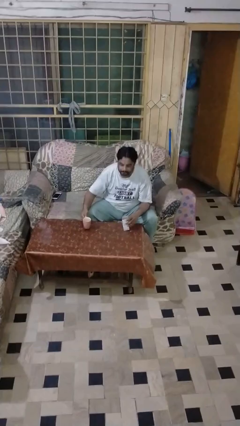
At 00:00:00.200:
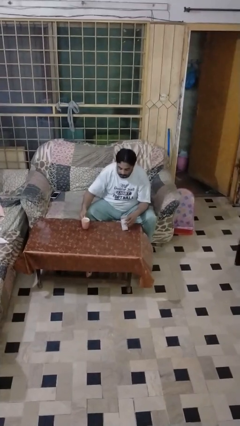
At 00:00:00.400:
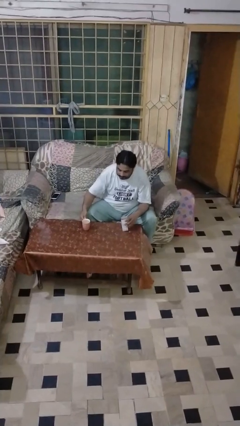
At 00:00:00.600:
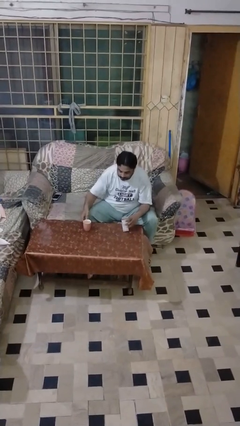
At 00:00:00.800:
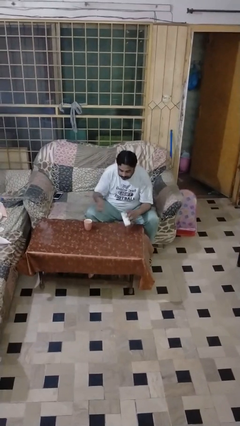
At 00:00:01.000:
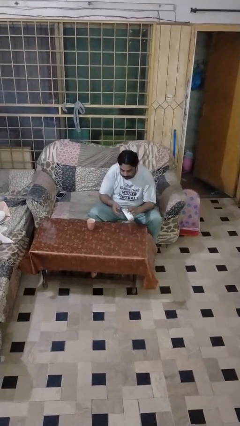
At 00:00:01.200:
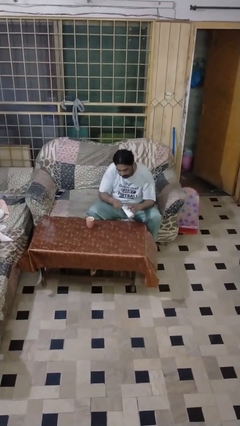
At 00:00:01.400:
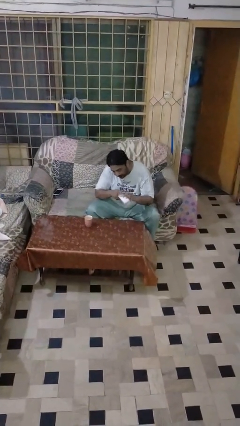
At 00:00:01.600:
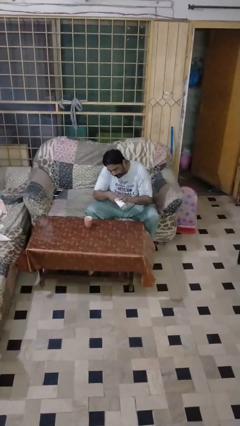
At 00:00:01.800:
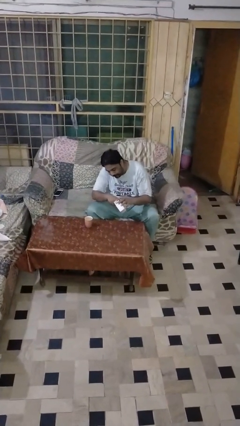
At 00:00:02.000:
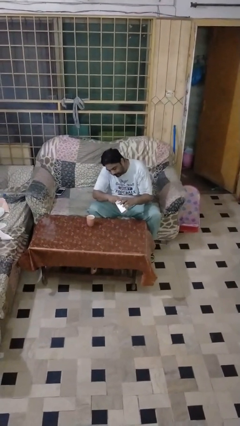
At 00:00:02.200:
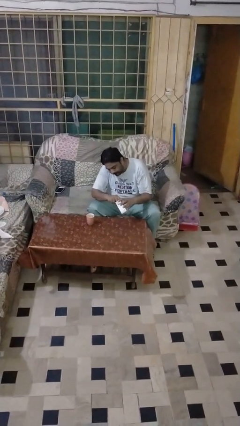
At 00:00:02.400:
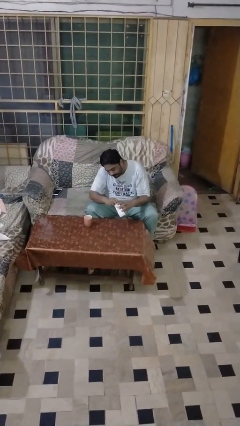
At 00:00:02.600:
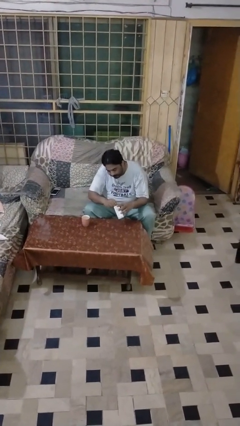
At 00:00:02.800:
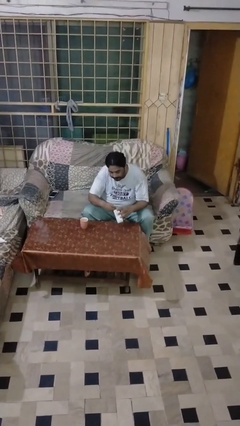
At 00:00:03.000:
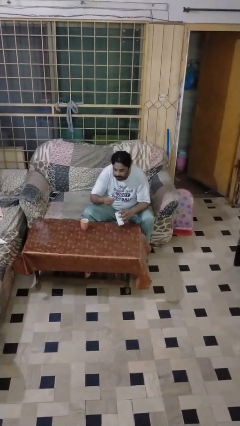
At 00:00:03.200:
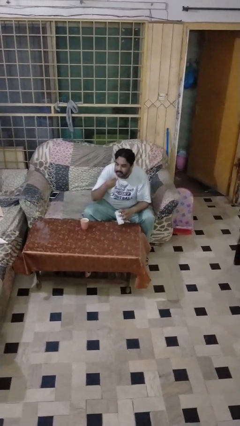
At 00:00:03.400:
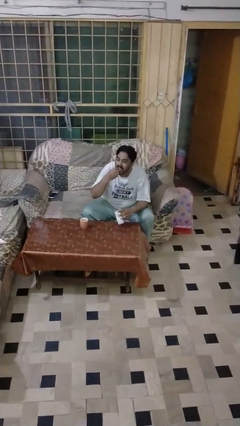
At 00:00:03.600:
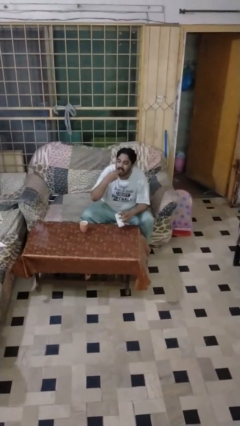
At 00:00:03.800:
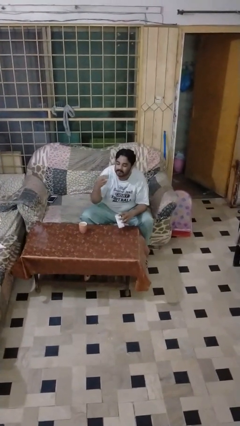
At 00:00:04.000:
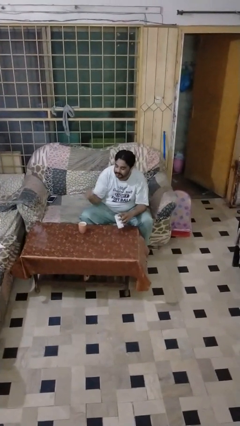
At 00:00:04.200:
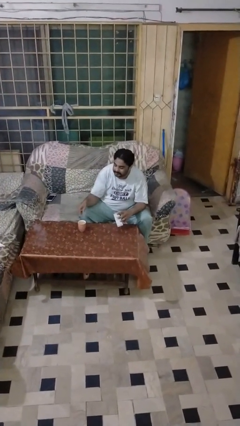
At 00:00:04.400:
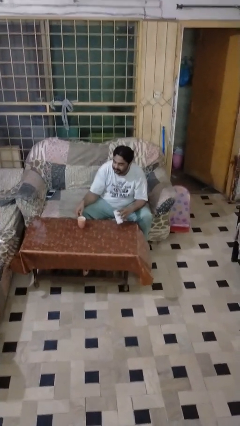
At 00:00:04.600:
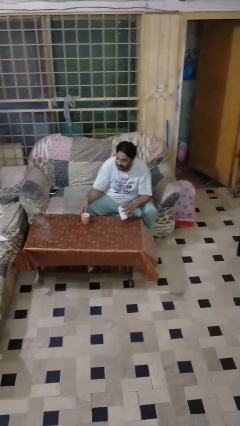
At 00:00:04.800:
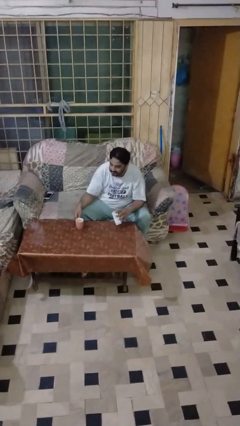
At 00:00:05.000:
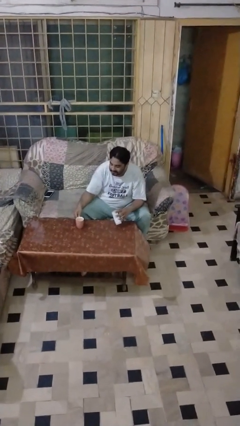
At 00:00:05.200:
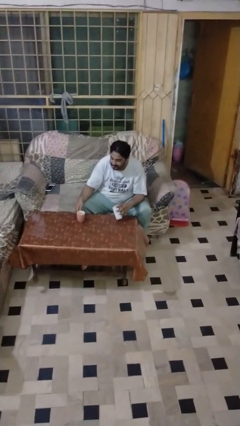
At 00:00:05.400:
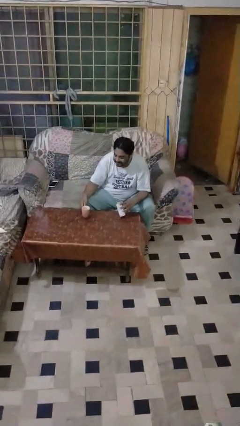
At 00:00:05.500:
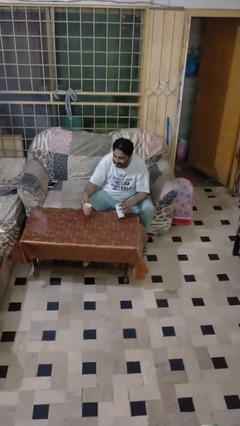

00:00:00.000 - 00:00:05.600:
person takes medicine pills

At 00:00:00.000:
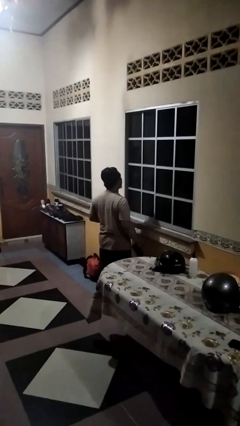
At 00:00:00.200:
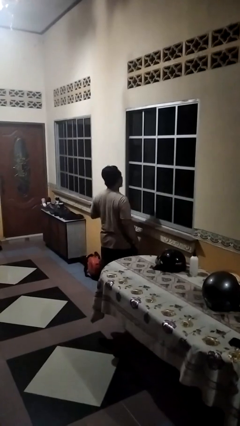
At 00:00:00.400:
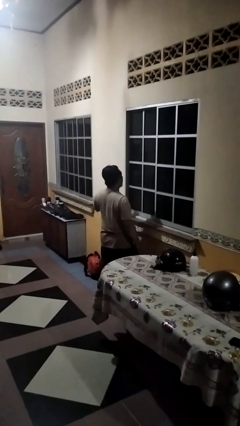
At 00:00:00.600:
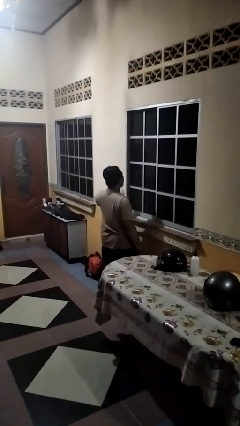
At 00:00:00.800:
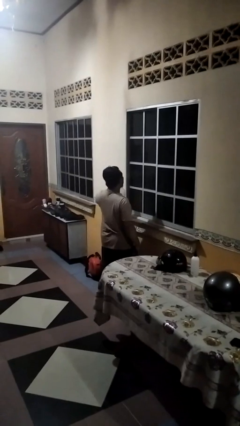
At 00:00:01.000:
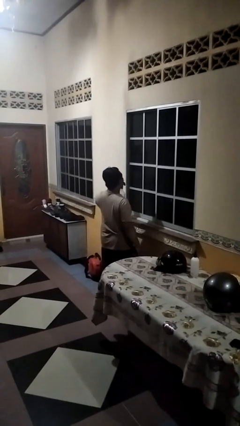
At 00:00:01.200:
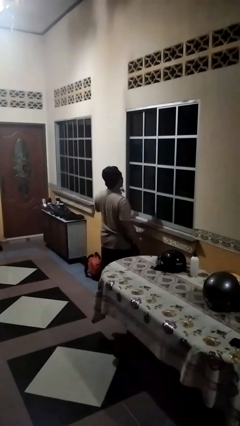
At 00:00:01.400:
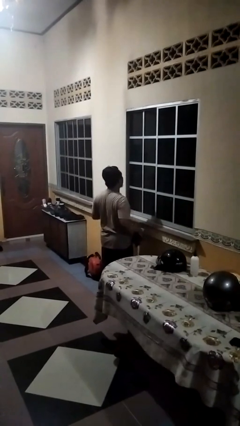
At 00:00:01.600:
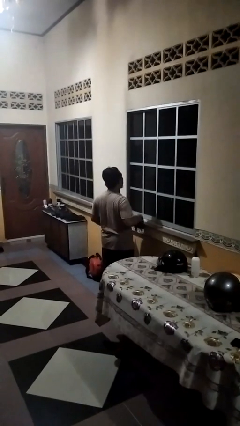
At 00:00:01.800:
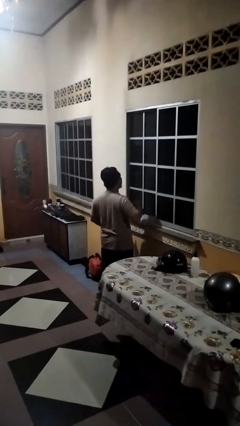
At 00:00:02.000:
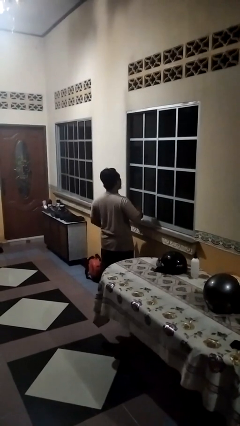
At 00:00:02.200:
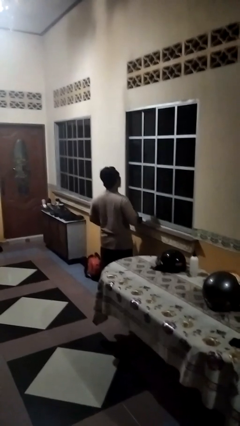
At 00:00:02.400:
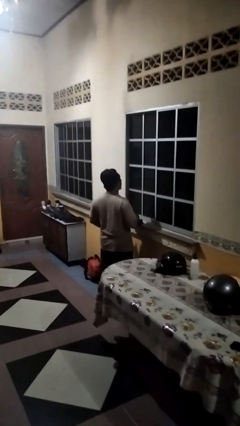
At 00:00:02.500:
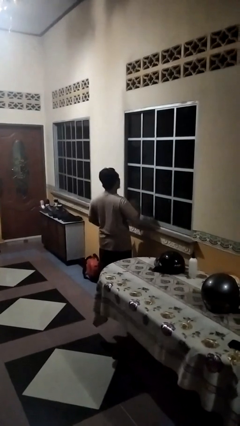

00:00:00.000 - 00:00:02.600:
person sprays from bottle

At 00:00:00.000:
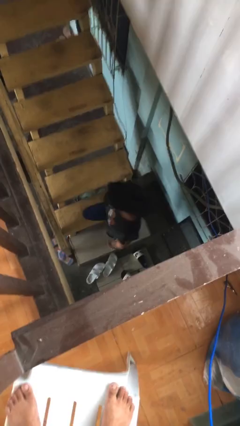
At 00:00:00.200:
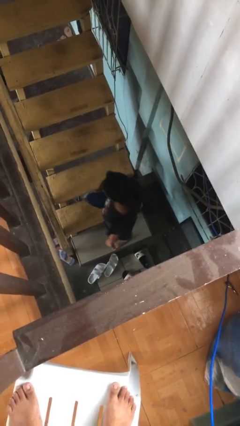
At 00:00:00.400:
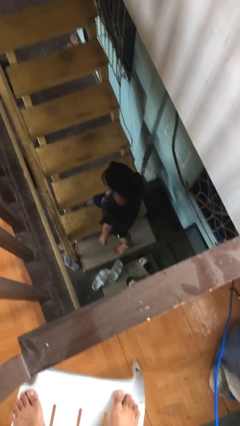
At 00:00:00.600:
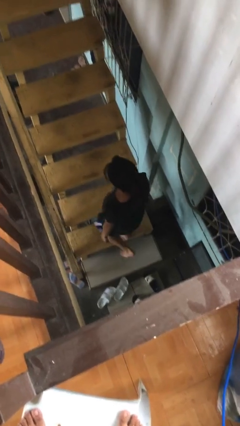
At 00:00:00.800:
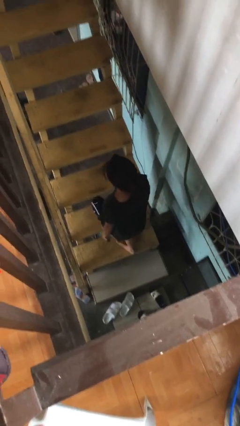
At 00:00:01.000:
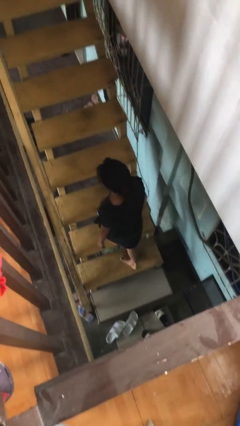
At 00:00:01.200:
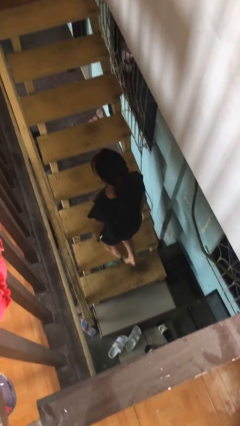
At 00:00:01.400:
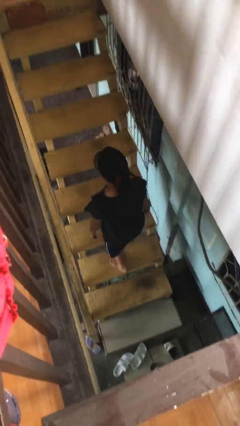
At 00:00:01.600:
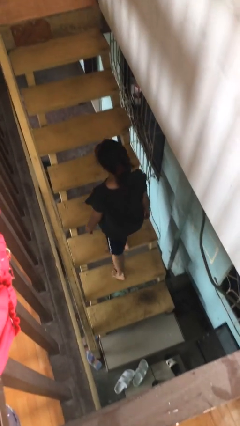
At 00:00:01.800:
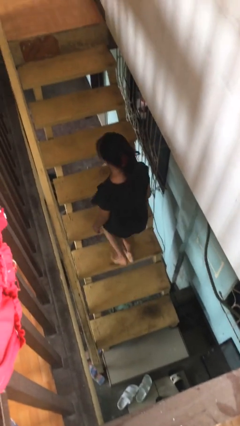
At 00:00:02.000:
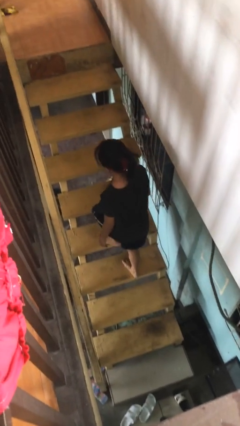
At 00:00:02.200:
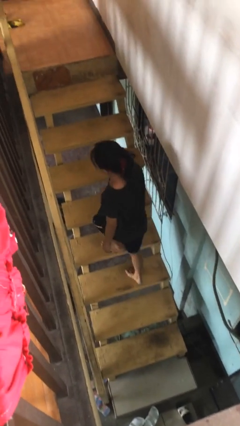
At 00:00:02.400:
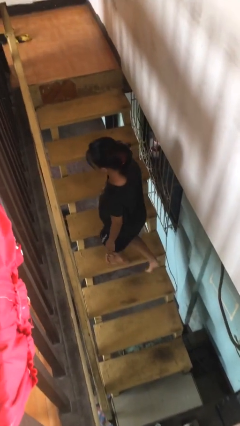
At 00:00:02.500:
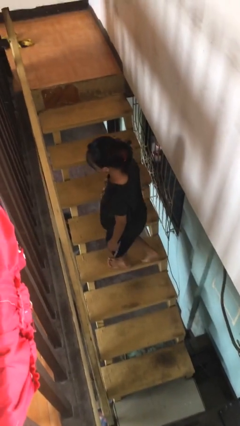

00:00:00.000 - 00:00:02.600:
person climbs up stairs

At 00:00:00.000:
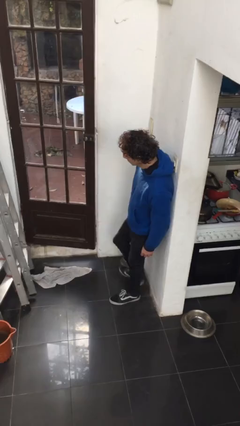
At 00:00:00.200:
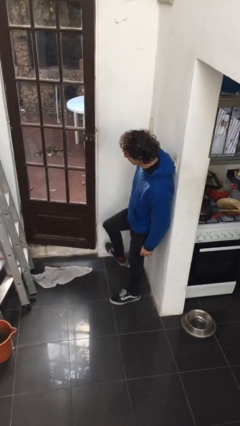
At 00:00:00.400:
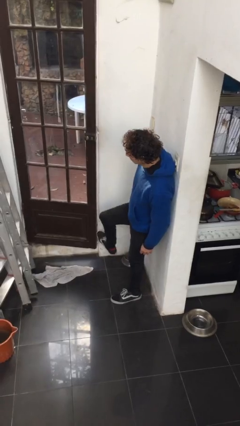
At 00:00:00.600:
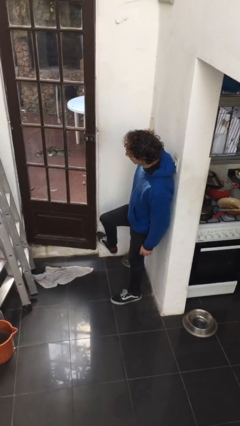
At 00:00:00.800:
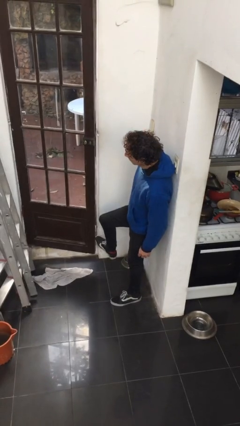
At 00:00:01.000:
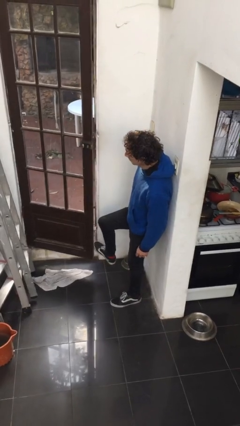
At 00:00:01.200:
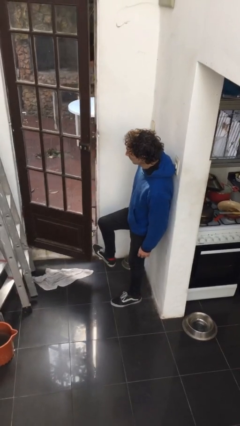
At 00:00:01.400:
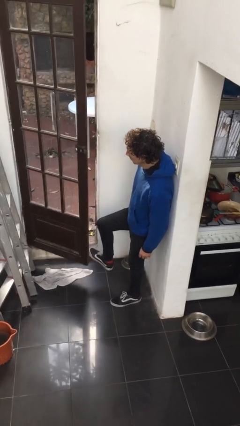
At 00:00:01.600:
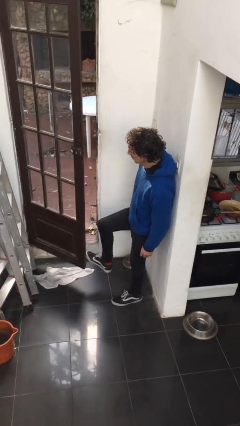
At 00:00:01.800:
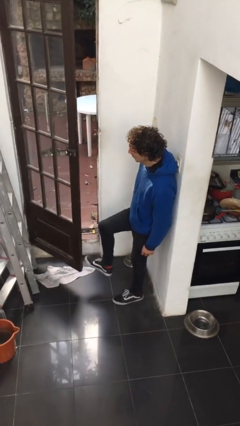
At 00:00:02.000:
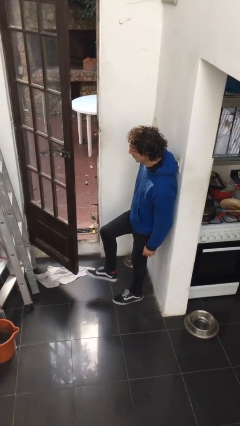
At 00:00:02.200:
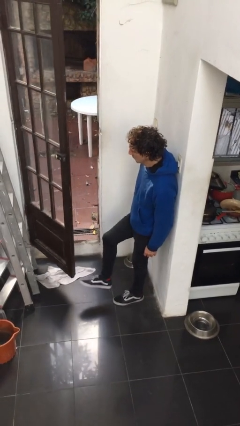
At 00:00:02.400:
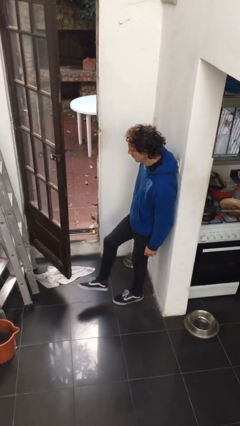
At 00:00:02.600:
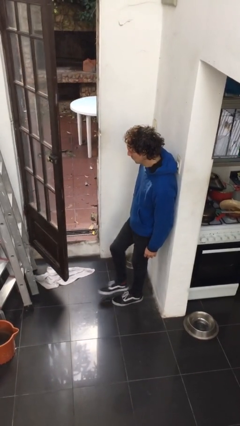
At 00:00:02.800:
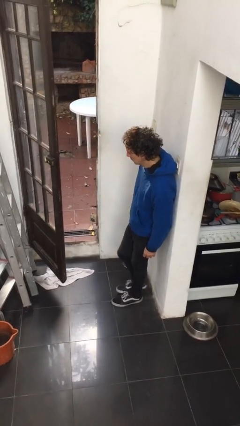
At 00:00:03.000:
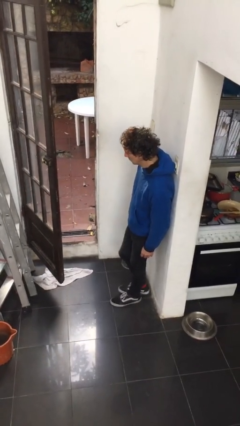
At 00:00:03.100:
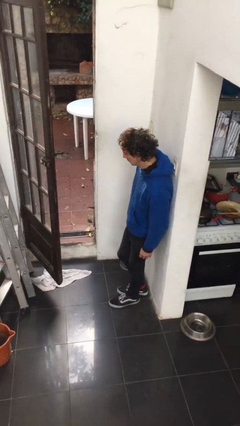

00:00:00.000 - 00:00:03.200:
person opens facility door

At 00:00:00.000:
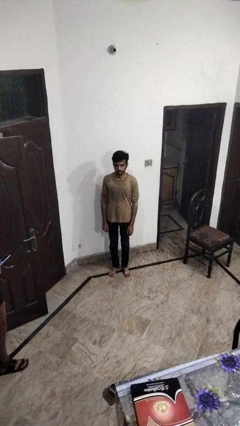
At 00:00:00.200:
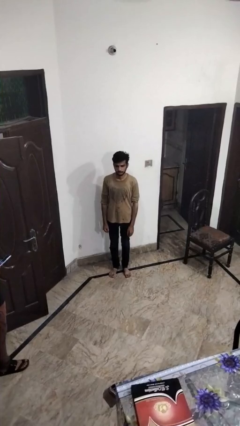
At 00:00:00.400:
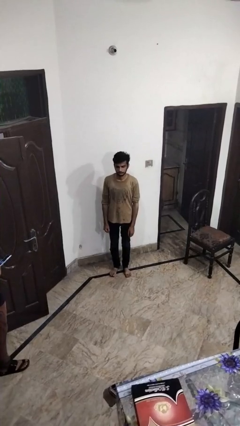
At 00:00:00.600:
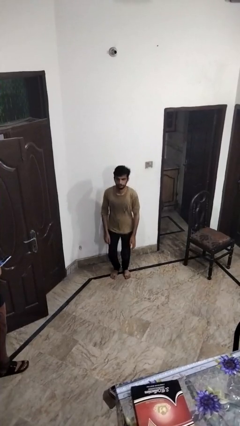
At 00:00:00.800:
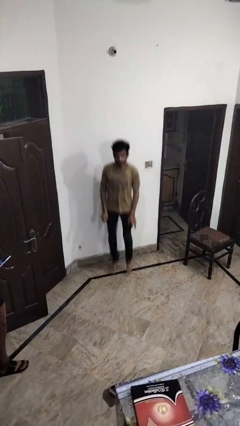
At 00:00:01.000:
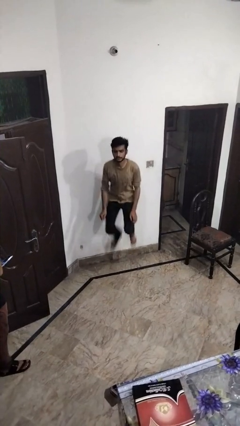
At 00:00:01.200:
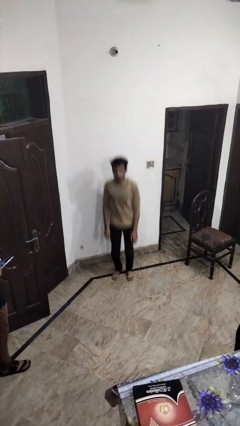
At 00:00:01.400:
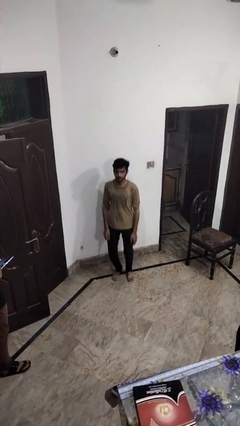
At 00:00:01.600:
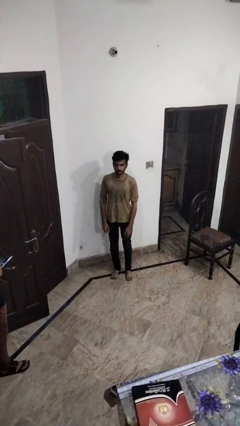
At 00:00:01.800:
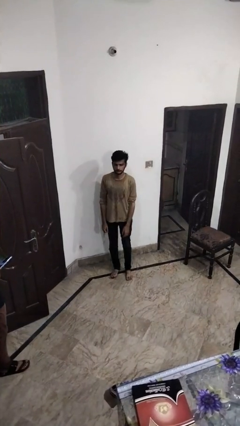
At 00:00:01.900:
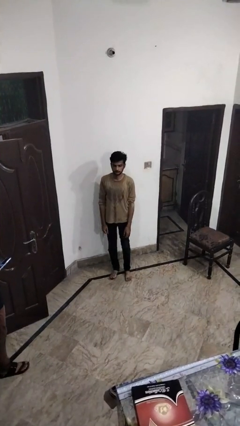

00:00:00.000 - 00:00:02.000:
person jumps

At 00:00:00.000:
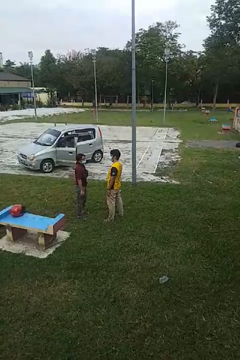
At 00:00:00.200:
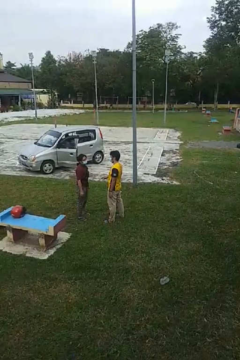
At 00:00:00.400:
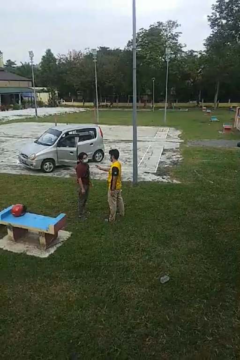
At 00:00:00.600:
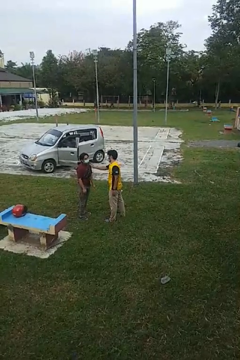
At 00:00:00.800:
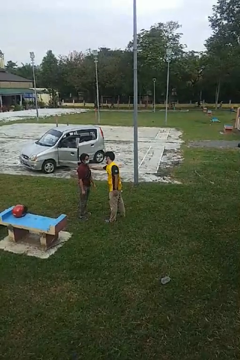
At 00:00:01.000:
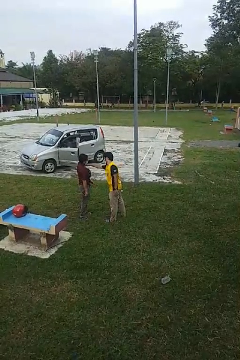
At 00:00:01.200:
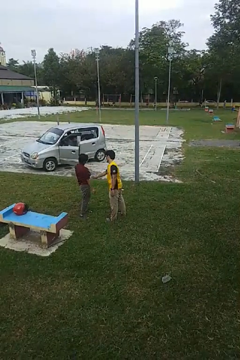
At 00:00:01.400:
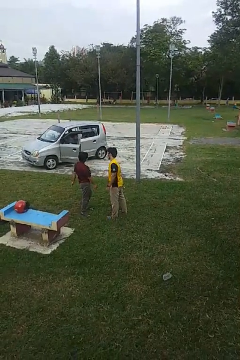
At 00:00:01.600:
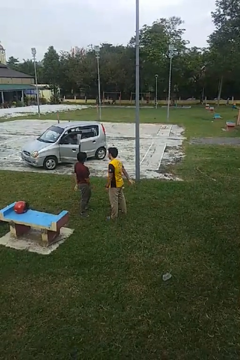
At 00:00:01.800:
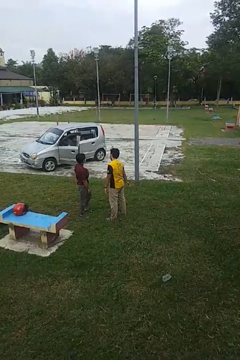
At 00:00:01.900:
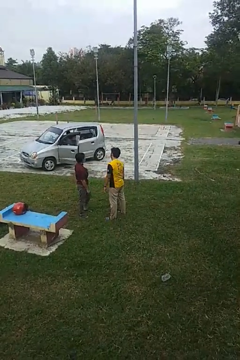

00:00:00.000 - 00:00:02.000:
person shoves person
